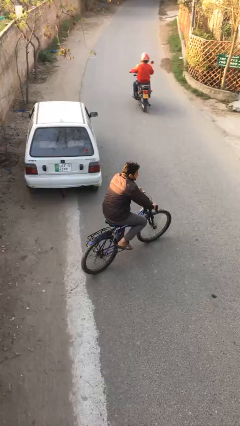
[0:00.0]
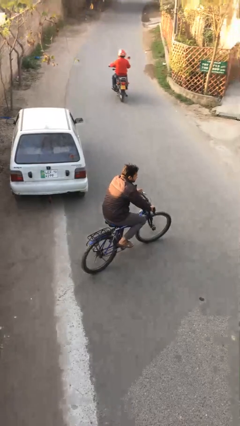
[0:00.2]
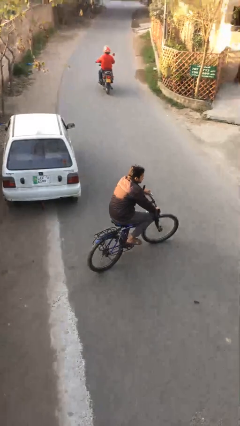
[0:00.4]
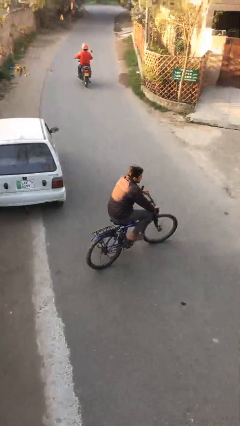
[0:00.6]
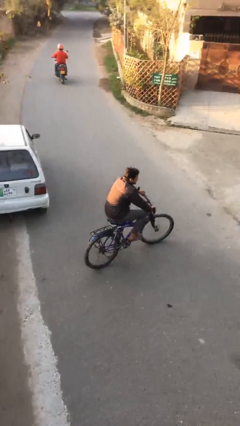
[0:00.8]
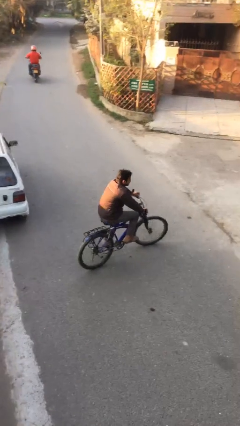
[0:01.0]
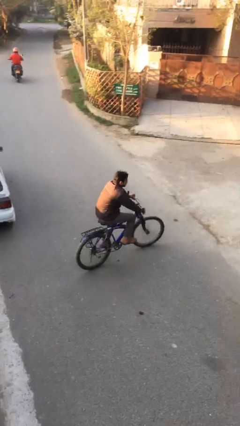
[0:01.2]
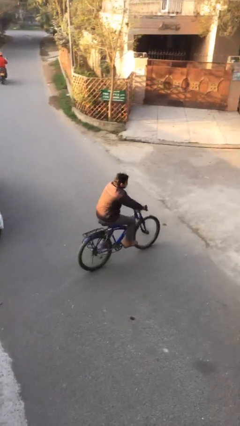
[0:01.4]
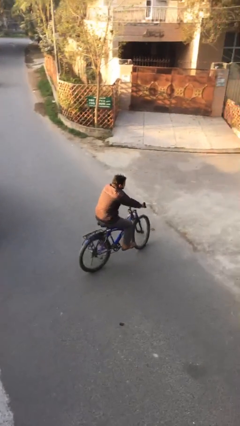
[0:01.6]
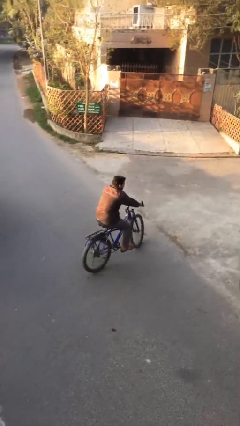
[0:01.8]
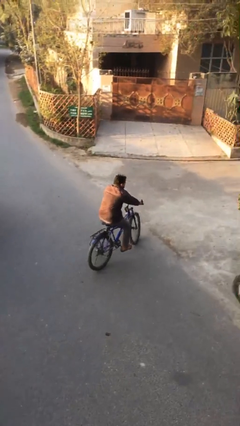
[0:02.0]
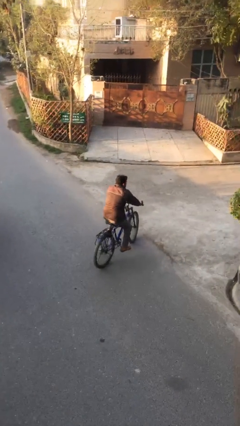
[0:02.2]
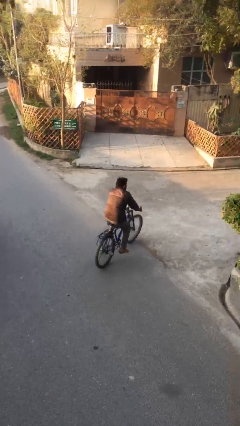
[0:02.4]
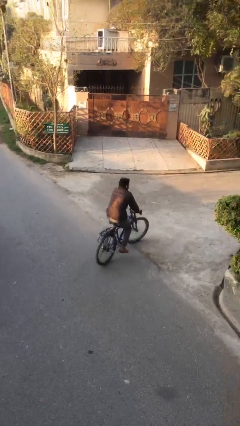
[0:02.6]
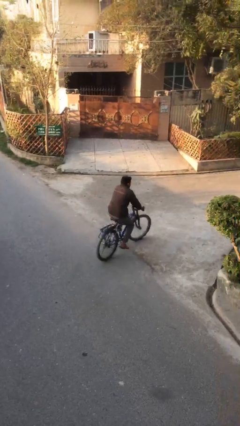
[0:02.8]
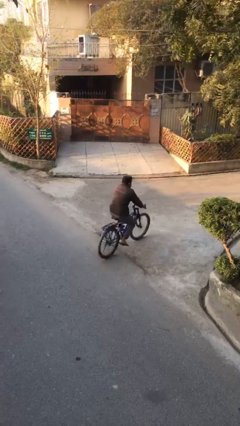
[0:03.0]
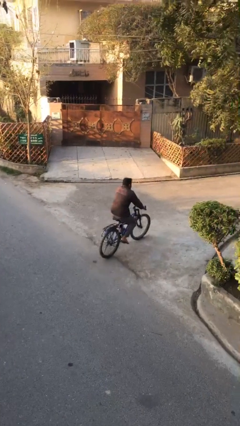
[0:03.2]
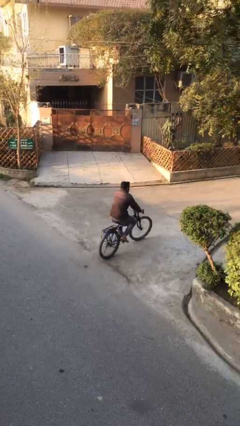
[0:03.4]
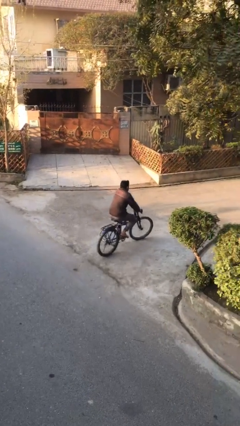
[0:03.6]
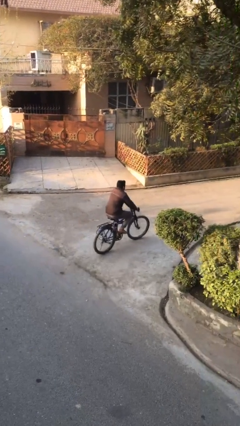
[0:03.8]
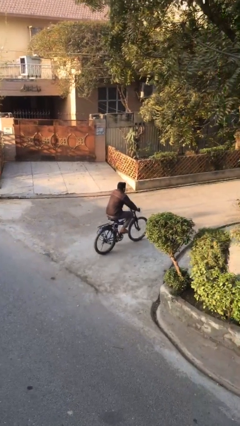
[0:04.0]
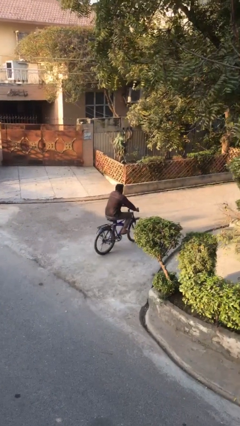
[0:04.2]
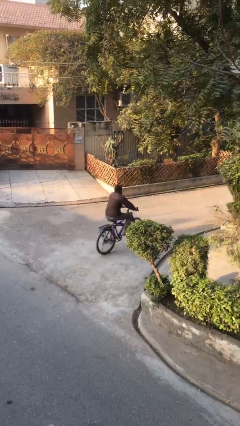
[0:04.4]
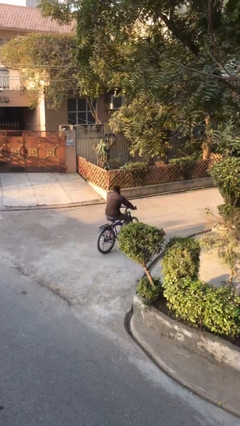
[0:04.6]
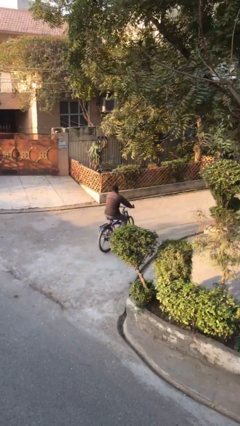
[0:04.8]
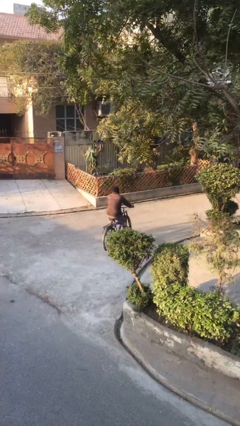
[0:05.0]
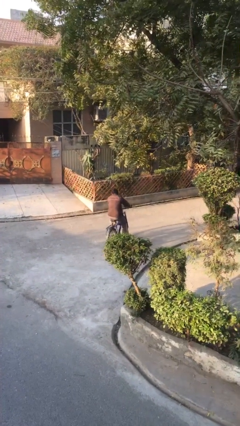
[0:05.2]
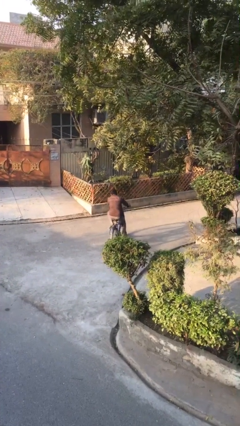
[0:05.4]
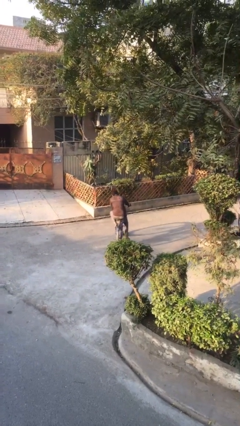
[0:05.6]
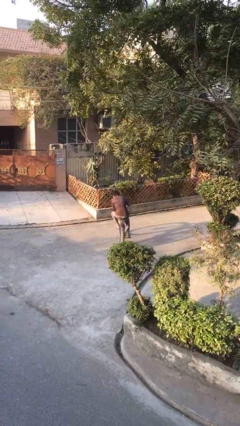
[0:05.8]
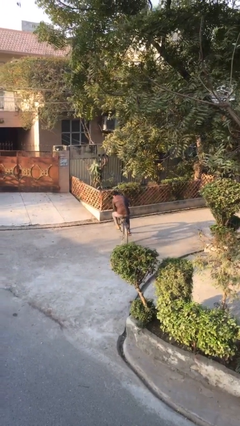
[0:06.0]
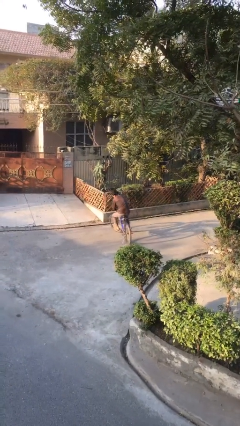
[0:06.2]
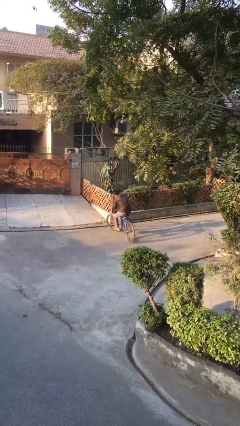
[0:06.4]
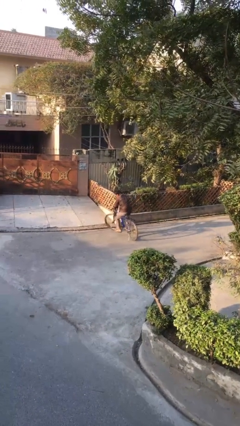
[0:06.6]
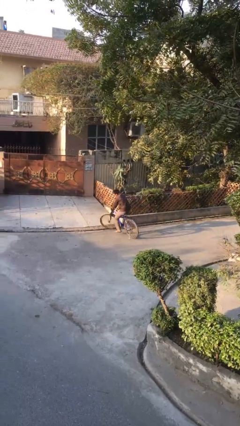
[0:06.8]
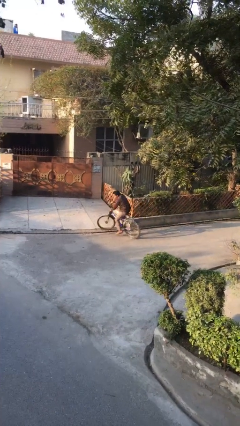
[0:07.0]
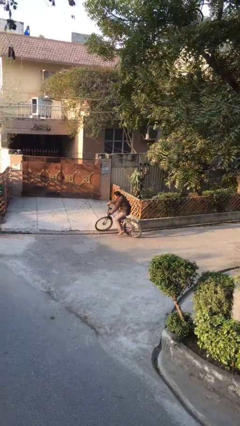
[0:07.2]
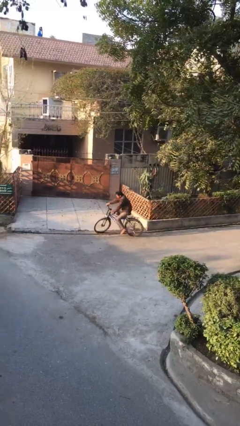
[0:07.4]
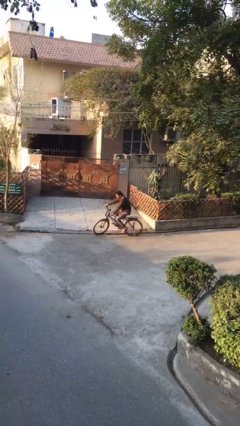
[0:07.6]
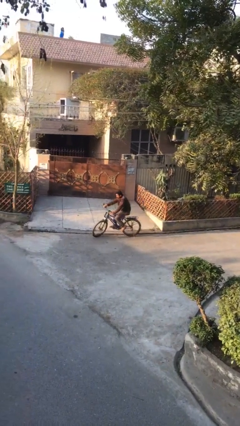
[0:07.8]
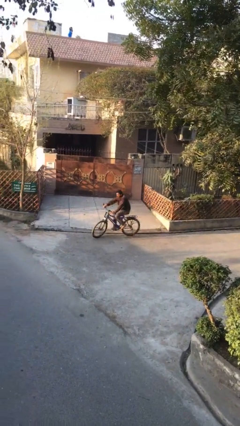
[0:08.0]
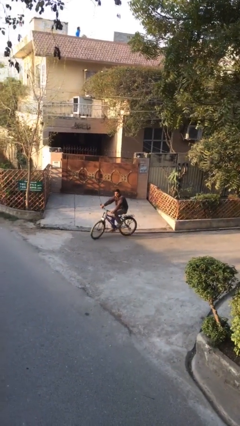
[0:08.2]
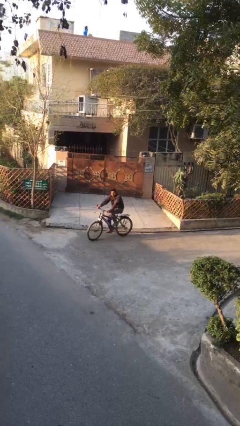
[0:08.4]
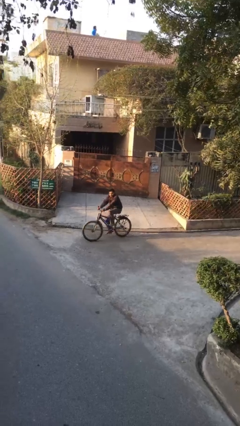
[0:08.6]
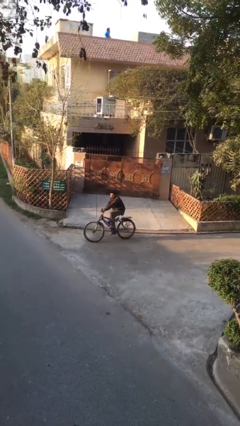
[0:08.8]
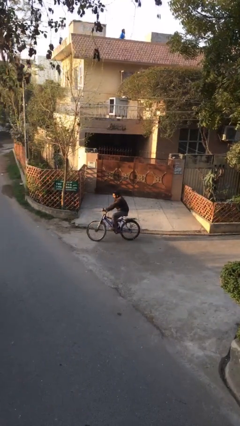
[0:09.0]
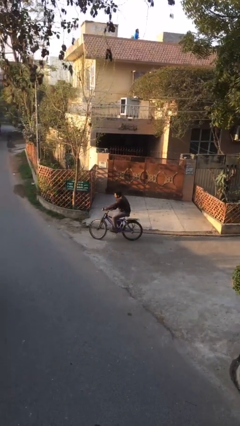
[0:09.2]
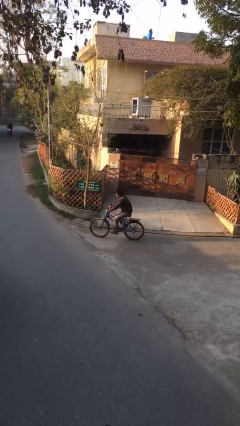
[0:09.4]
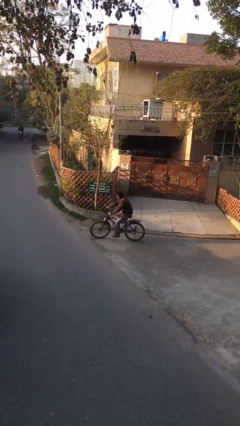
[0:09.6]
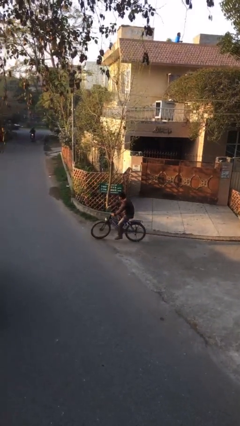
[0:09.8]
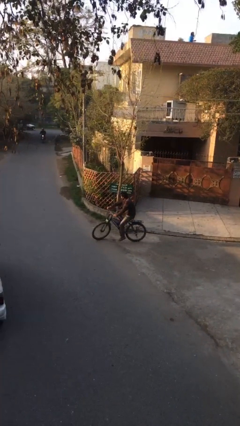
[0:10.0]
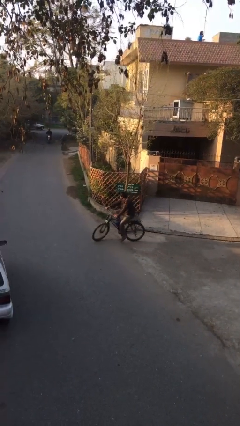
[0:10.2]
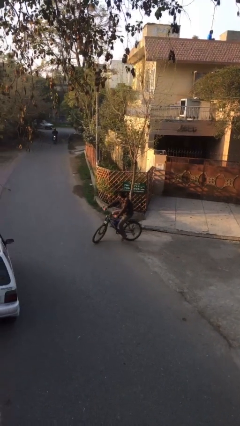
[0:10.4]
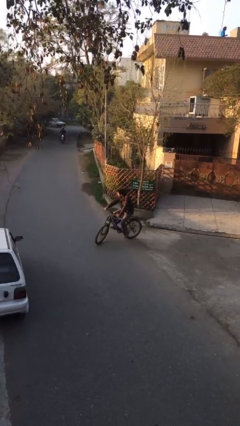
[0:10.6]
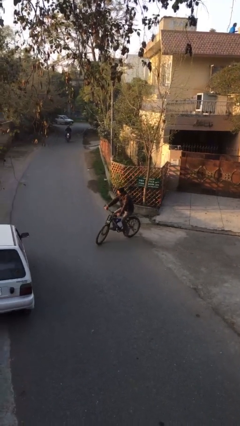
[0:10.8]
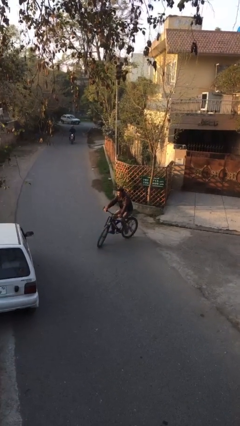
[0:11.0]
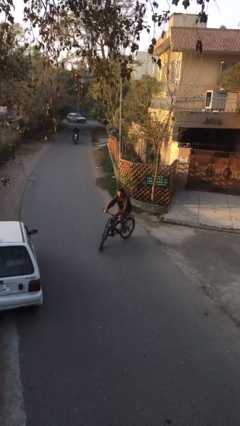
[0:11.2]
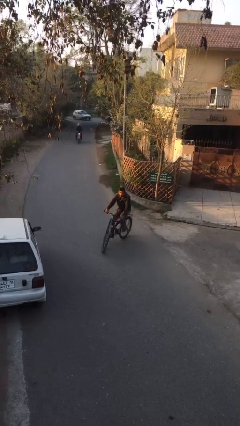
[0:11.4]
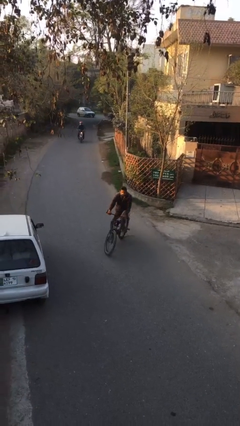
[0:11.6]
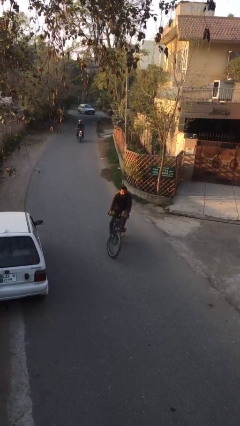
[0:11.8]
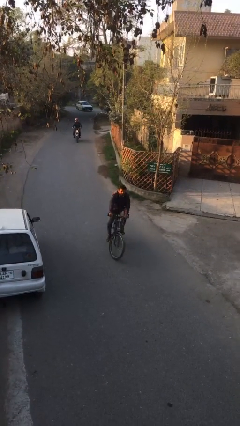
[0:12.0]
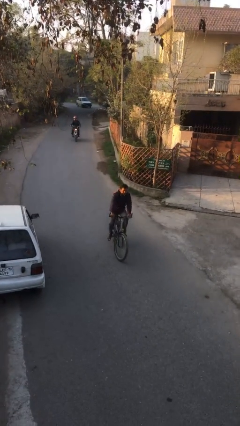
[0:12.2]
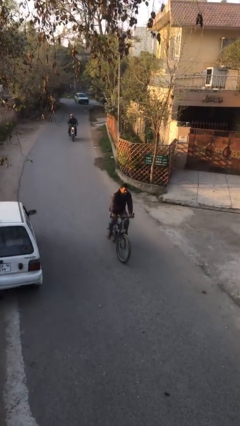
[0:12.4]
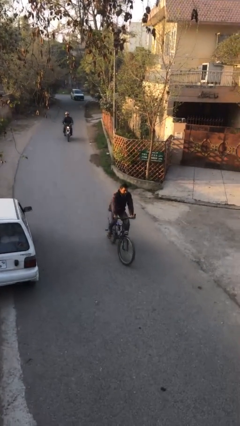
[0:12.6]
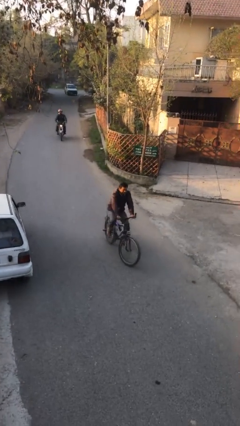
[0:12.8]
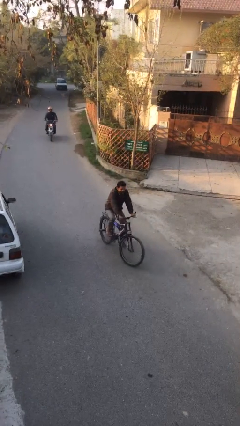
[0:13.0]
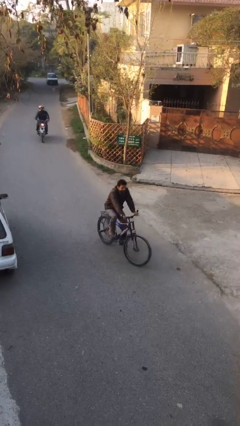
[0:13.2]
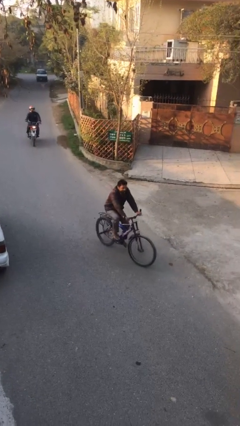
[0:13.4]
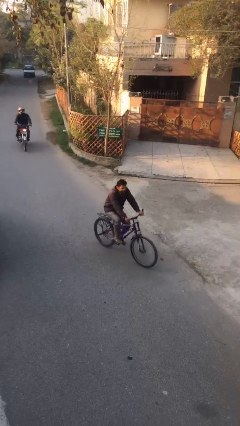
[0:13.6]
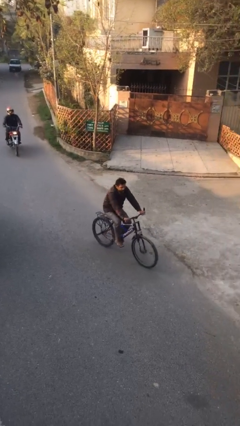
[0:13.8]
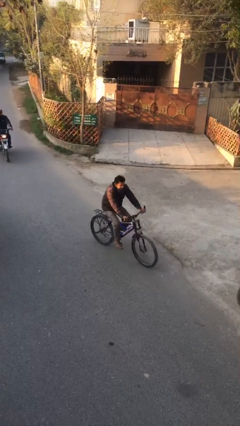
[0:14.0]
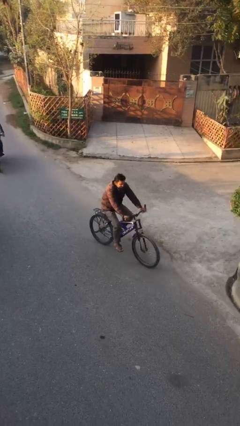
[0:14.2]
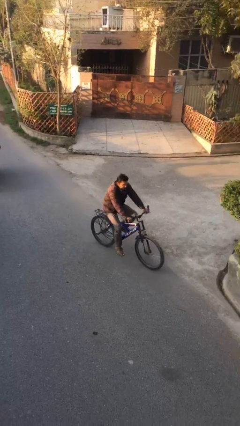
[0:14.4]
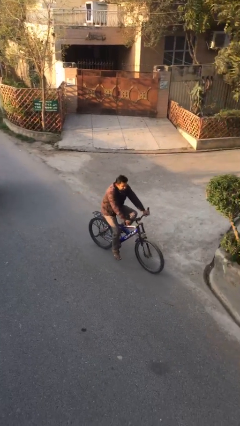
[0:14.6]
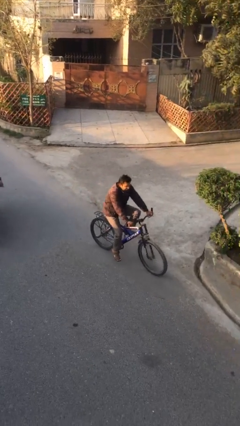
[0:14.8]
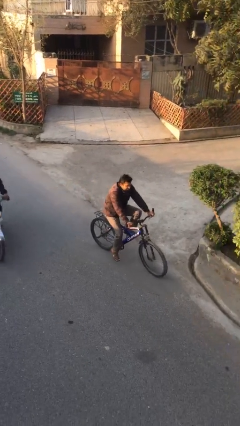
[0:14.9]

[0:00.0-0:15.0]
person rides bicycle

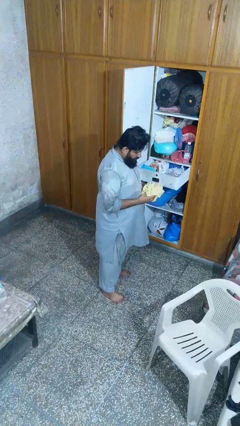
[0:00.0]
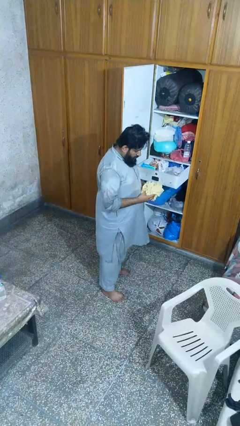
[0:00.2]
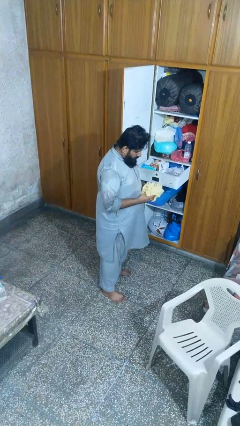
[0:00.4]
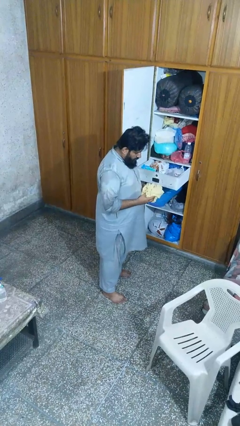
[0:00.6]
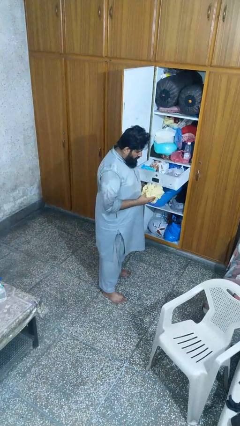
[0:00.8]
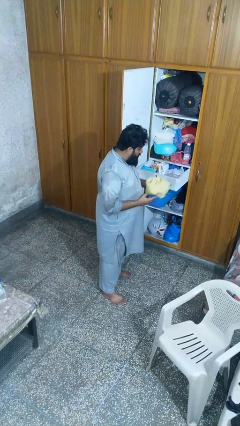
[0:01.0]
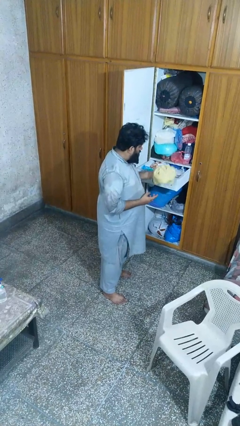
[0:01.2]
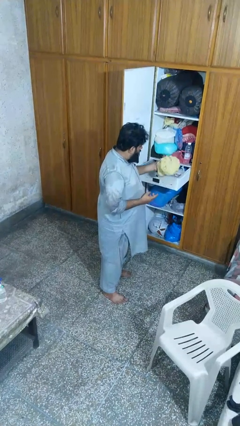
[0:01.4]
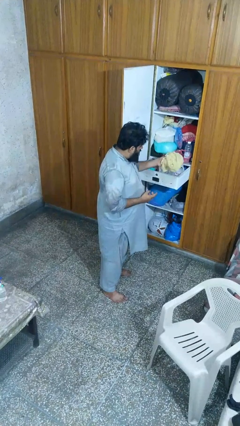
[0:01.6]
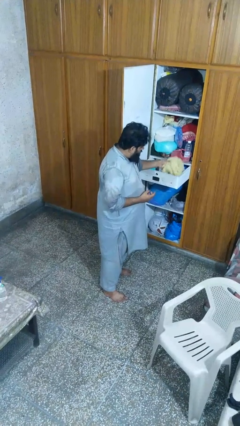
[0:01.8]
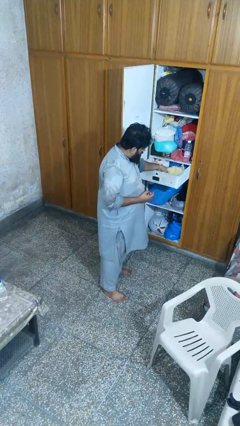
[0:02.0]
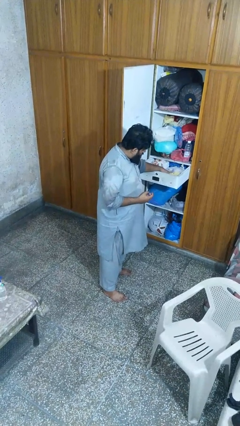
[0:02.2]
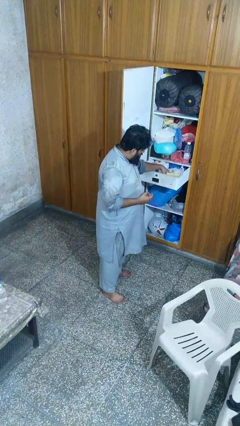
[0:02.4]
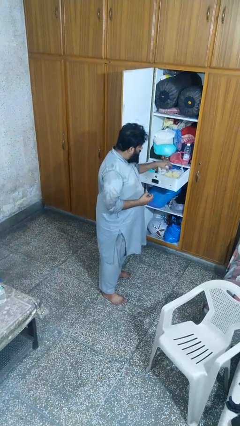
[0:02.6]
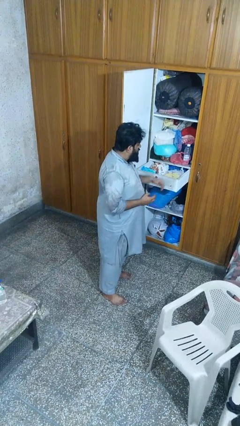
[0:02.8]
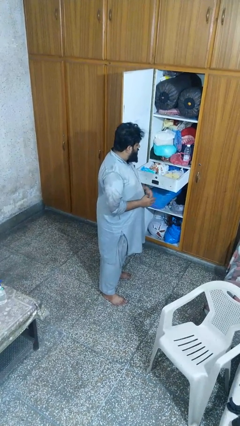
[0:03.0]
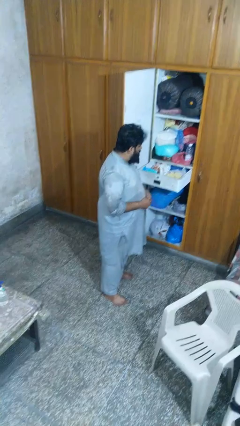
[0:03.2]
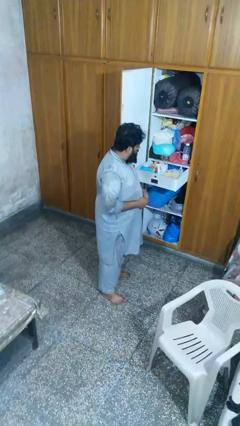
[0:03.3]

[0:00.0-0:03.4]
person puts clothes into dresser
